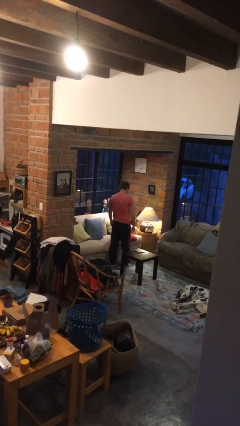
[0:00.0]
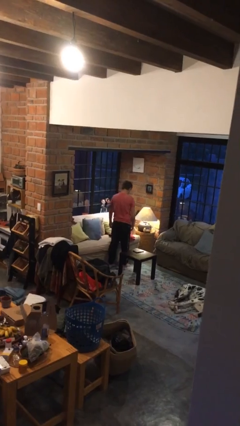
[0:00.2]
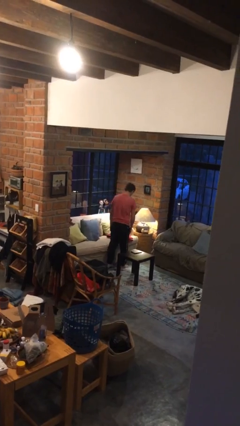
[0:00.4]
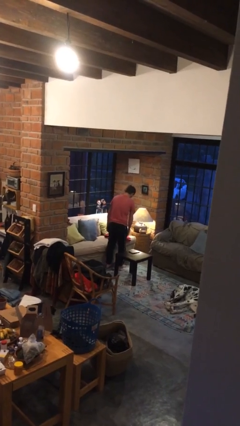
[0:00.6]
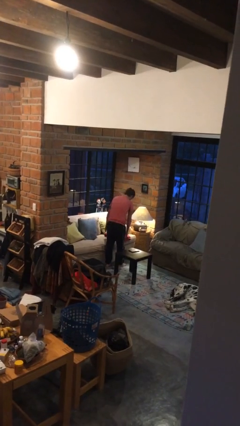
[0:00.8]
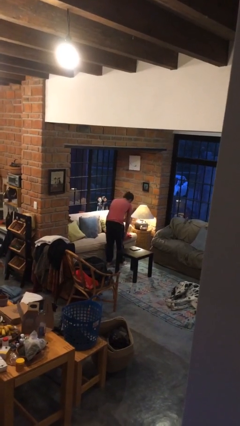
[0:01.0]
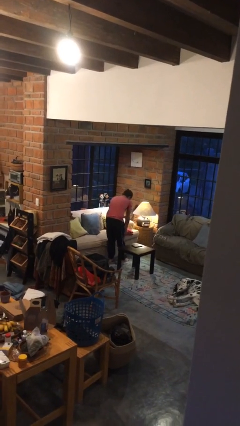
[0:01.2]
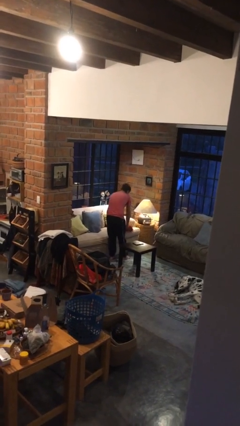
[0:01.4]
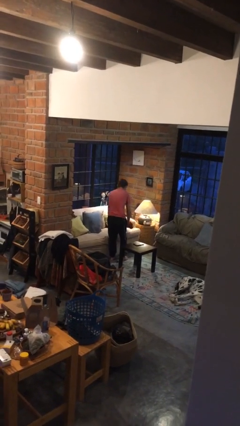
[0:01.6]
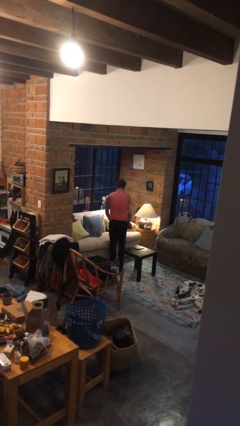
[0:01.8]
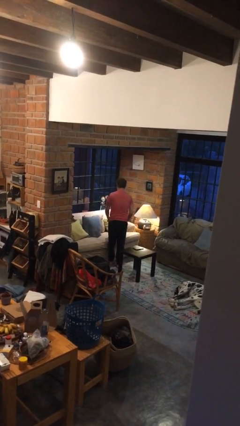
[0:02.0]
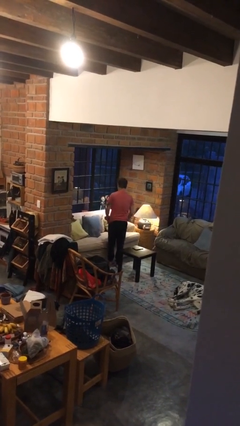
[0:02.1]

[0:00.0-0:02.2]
person picks up object from couch

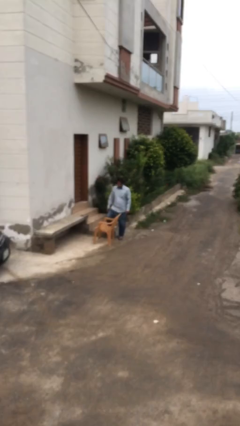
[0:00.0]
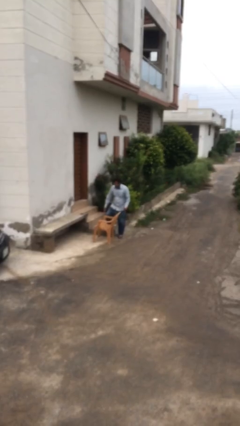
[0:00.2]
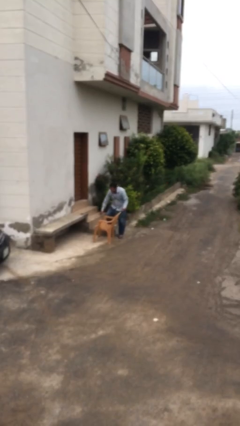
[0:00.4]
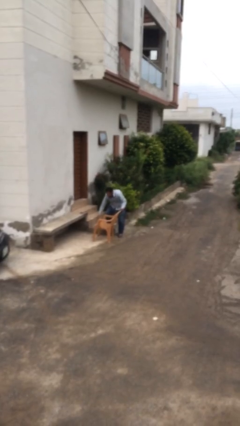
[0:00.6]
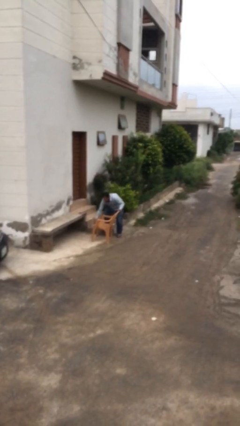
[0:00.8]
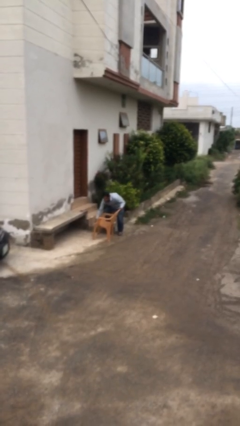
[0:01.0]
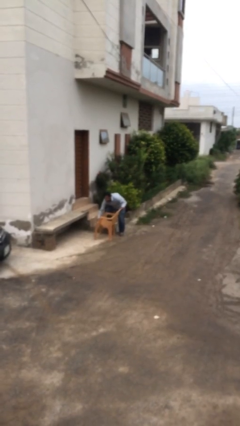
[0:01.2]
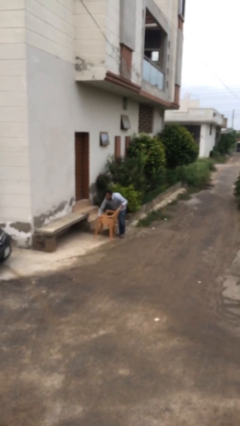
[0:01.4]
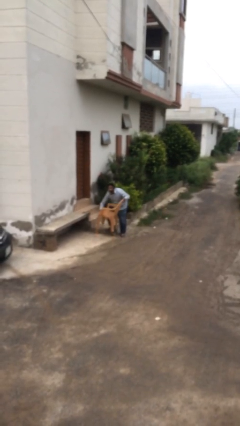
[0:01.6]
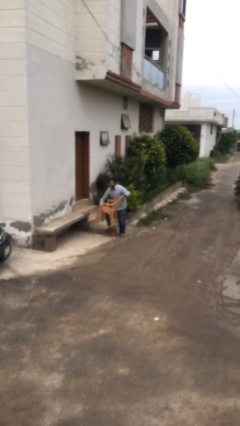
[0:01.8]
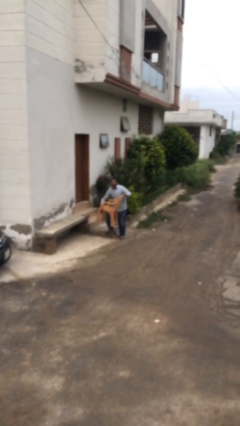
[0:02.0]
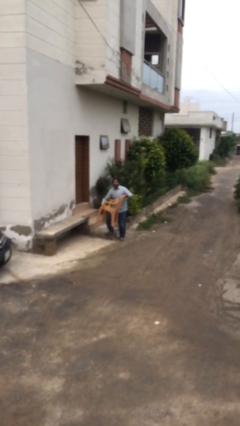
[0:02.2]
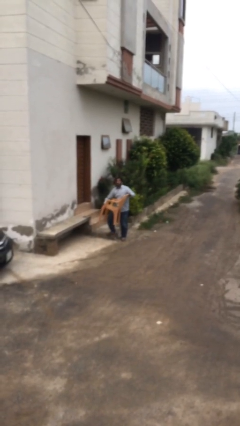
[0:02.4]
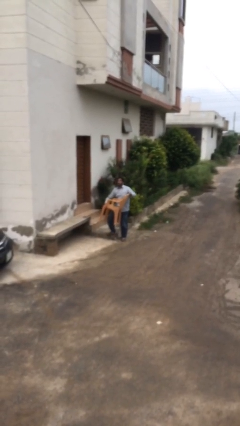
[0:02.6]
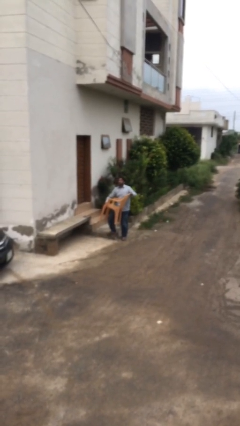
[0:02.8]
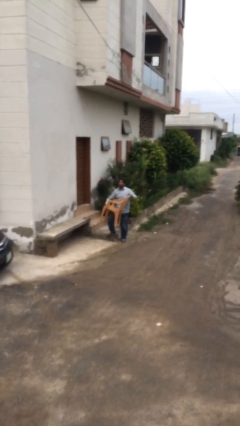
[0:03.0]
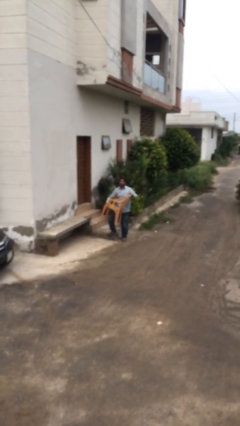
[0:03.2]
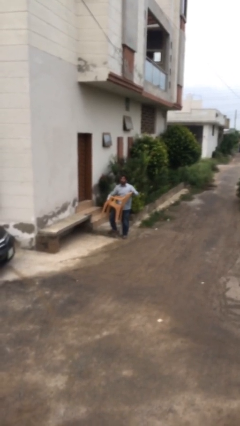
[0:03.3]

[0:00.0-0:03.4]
person picks up object from floor

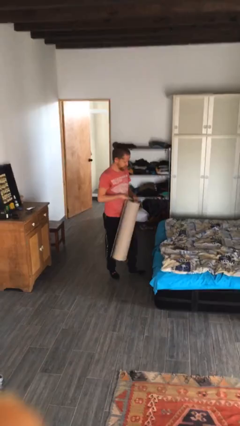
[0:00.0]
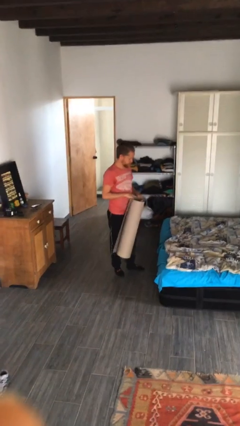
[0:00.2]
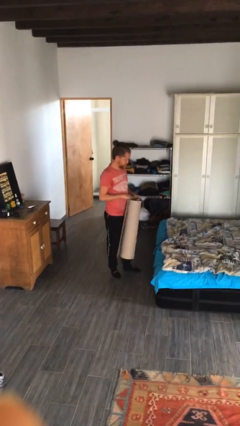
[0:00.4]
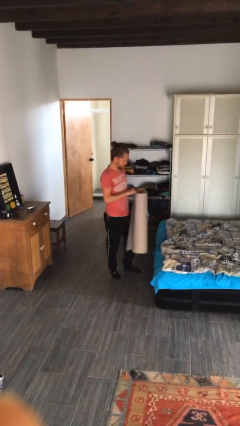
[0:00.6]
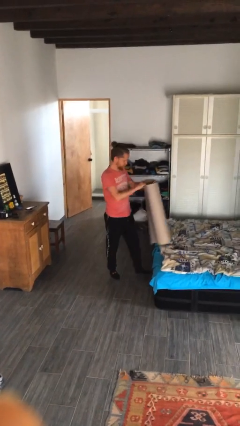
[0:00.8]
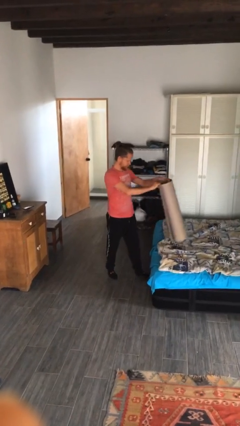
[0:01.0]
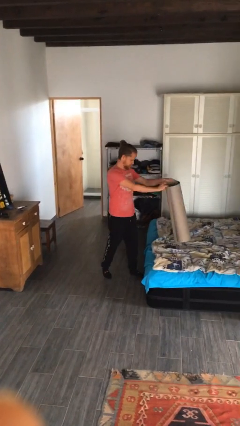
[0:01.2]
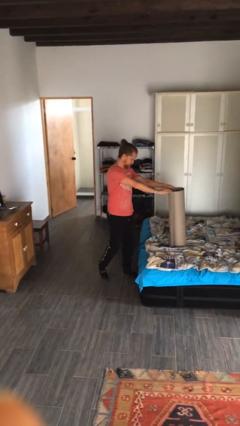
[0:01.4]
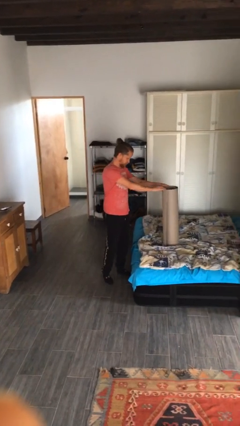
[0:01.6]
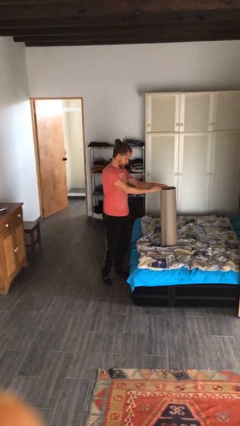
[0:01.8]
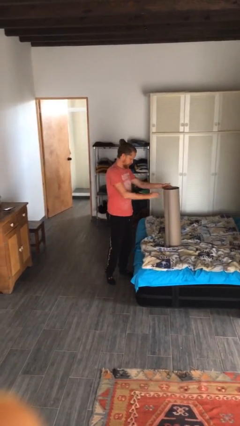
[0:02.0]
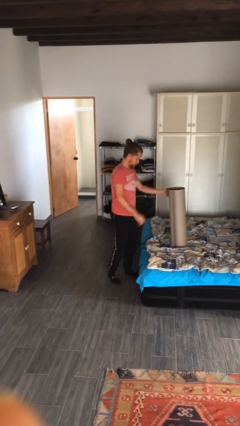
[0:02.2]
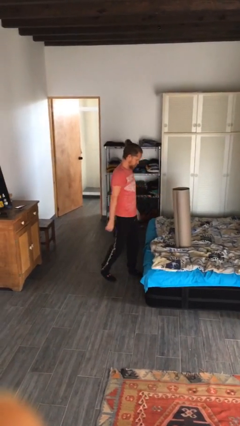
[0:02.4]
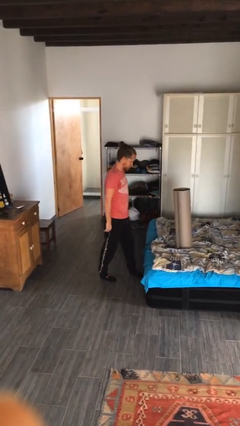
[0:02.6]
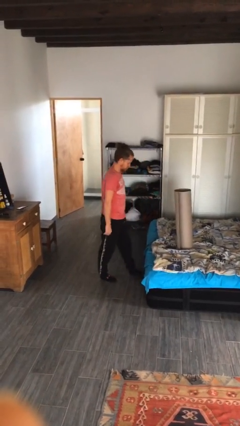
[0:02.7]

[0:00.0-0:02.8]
person puts down object on bed

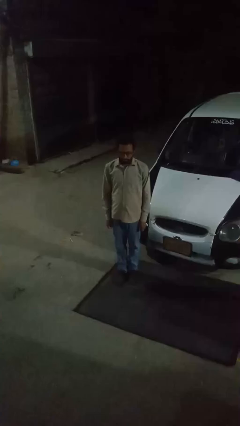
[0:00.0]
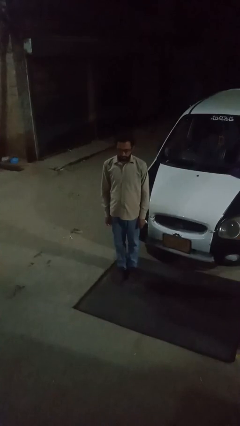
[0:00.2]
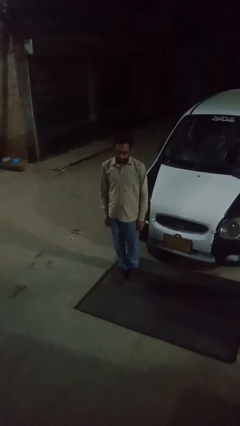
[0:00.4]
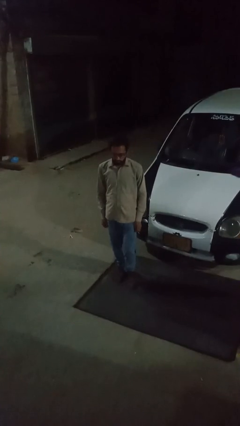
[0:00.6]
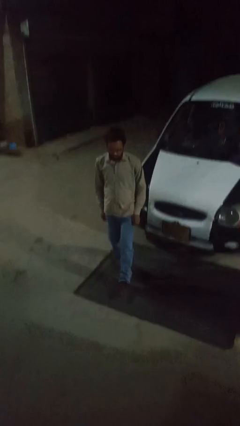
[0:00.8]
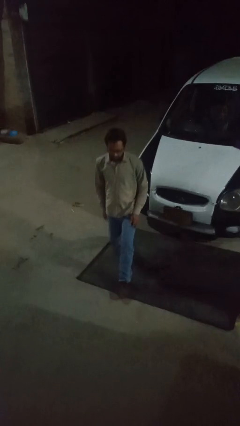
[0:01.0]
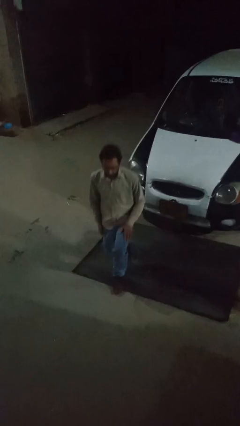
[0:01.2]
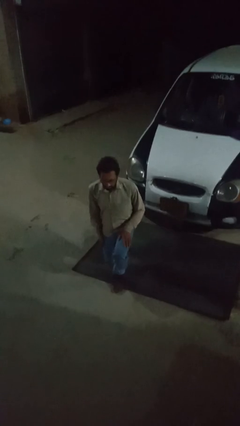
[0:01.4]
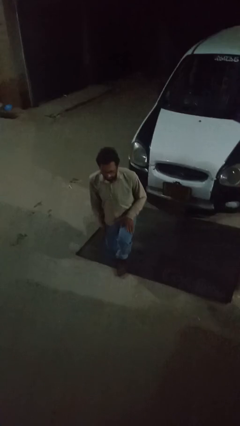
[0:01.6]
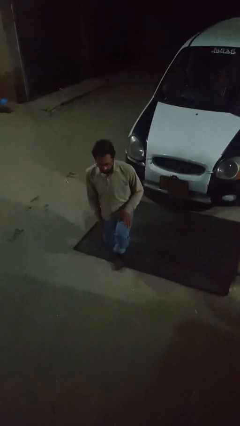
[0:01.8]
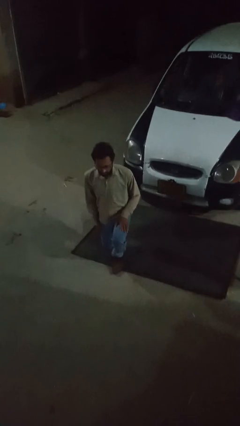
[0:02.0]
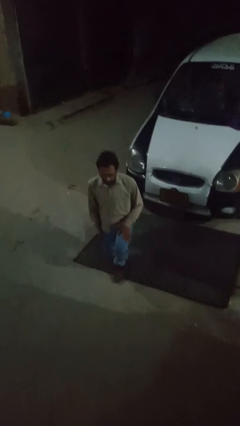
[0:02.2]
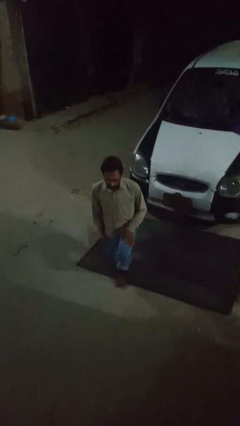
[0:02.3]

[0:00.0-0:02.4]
person squats

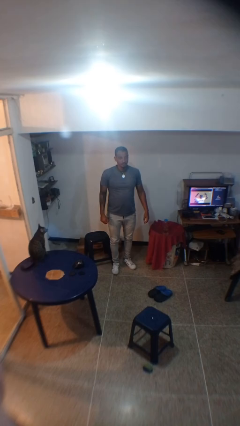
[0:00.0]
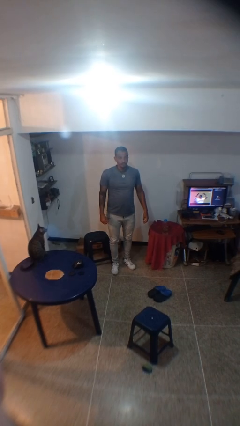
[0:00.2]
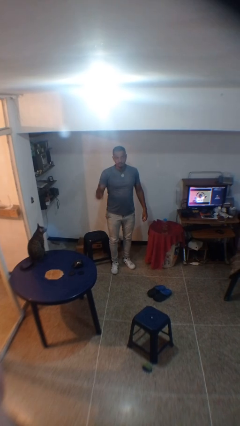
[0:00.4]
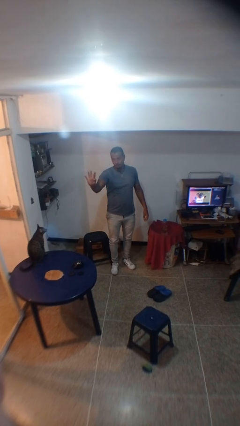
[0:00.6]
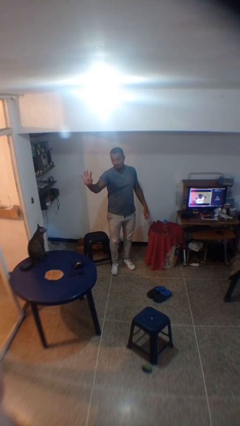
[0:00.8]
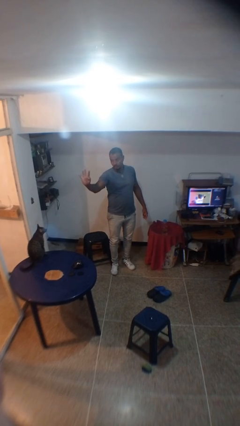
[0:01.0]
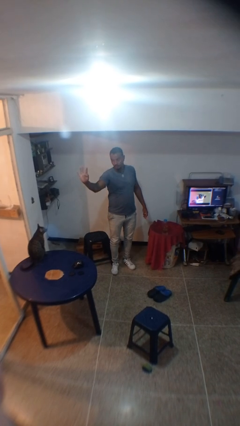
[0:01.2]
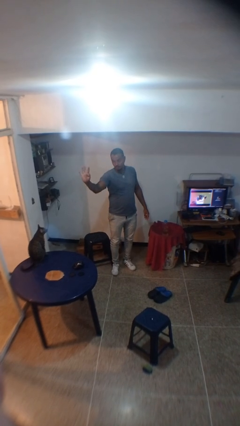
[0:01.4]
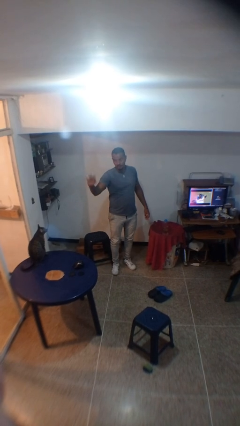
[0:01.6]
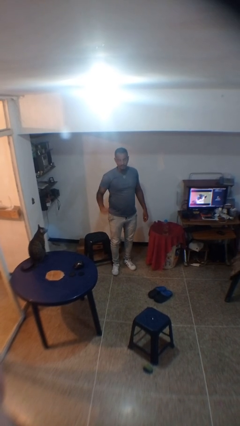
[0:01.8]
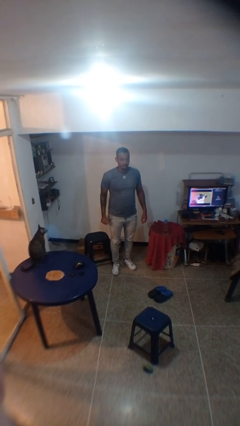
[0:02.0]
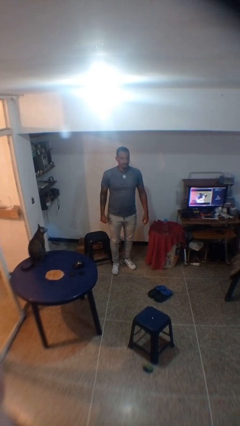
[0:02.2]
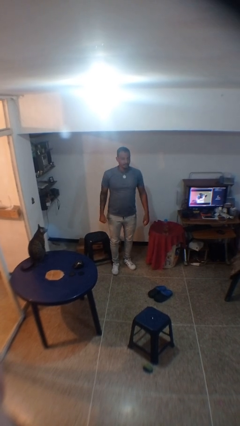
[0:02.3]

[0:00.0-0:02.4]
person gestures number four

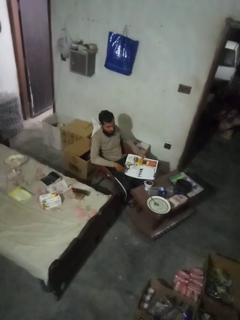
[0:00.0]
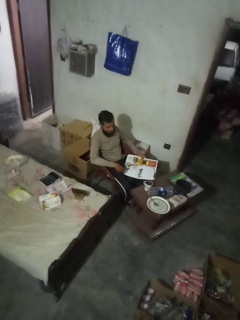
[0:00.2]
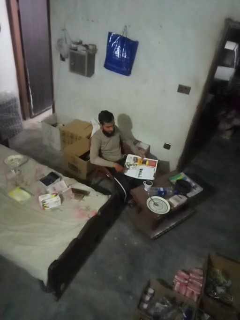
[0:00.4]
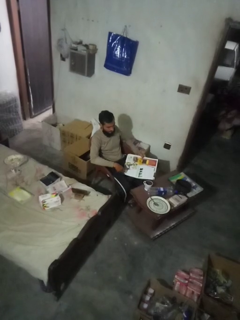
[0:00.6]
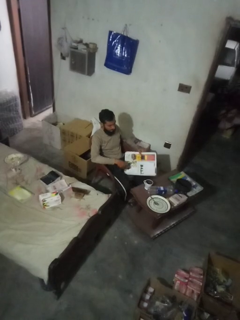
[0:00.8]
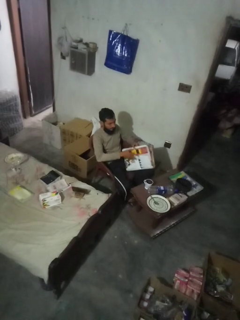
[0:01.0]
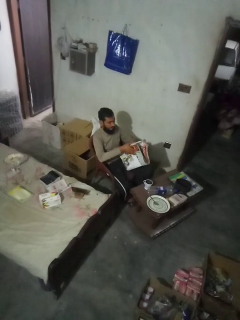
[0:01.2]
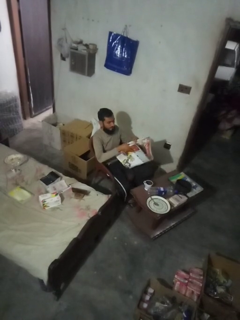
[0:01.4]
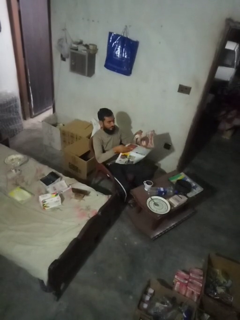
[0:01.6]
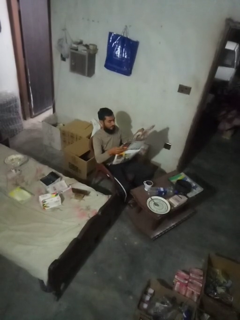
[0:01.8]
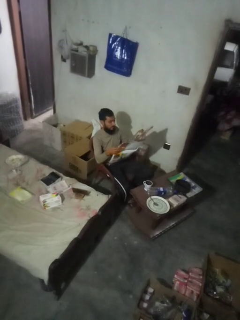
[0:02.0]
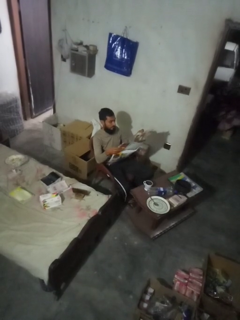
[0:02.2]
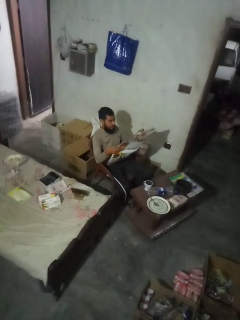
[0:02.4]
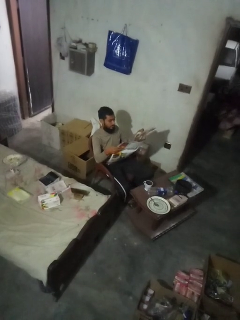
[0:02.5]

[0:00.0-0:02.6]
person reads newspaper

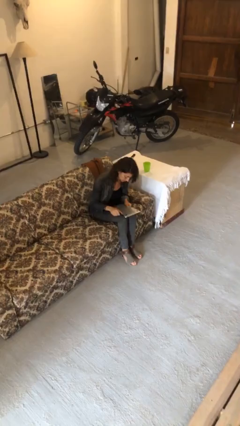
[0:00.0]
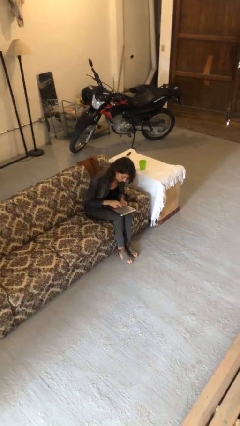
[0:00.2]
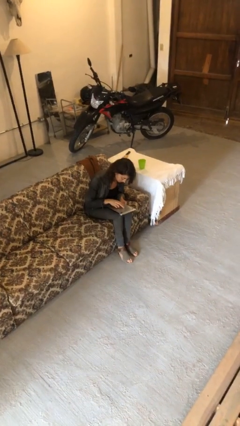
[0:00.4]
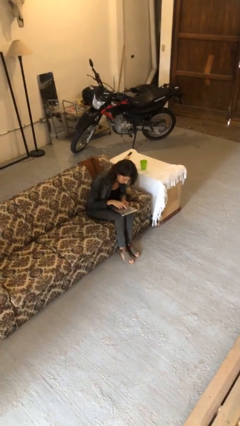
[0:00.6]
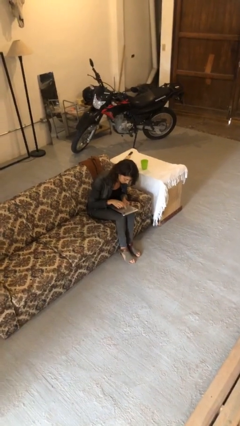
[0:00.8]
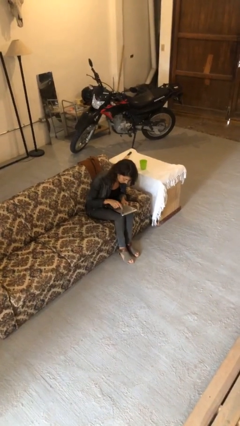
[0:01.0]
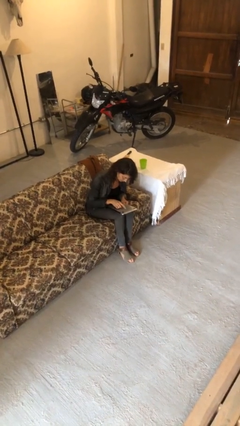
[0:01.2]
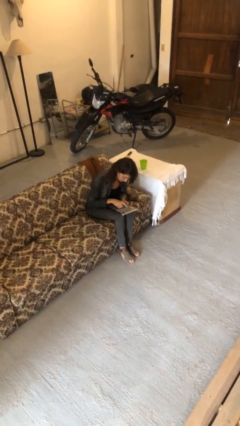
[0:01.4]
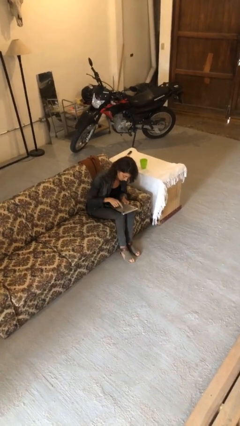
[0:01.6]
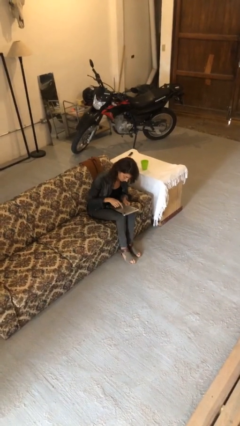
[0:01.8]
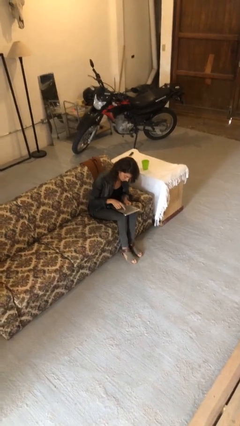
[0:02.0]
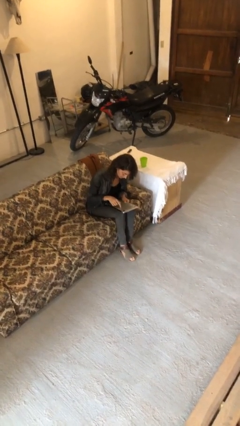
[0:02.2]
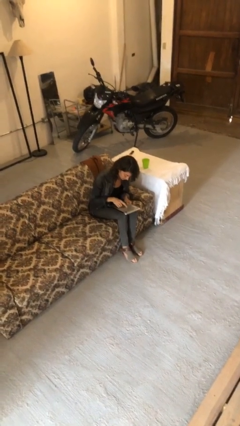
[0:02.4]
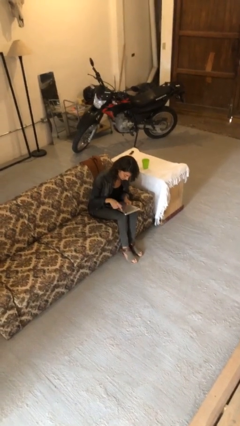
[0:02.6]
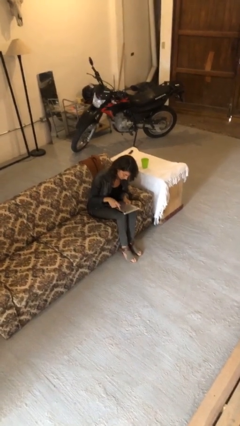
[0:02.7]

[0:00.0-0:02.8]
person interacts with tablet
